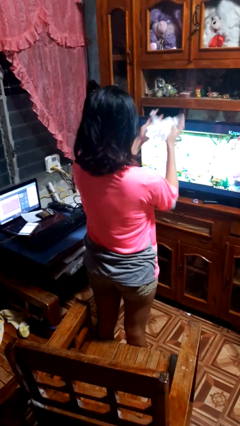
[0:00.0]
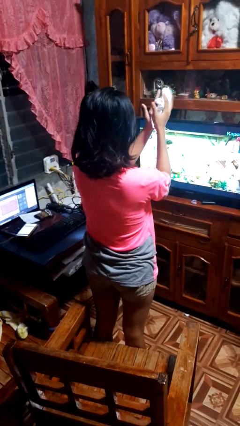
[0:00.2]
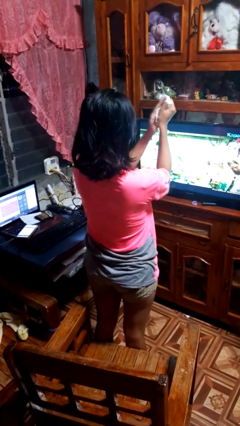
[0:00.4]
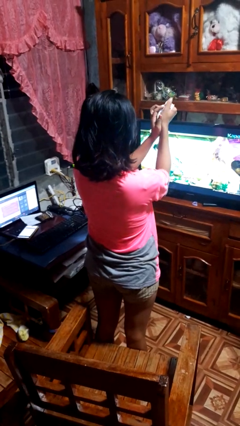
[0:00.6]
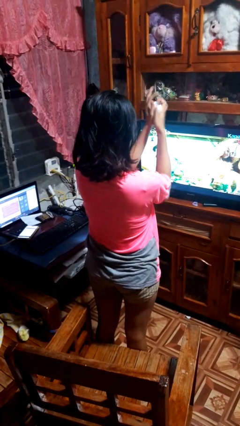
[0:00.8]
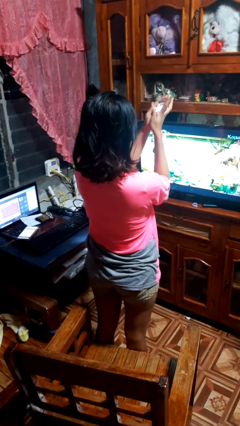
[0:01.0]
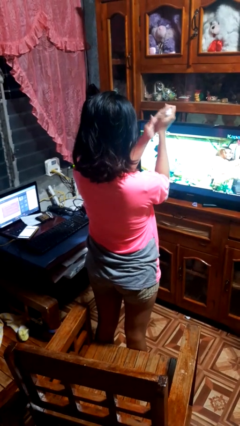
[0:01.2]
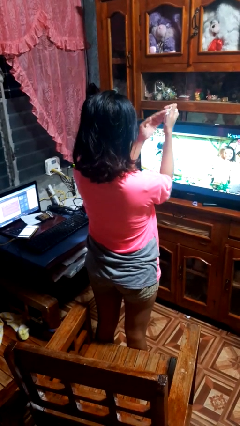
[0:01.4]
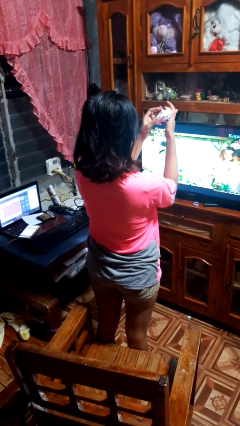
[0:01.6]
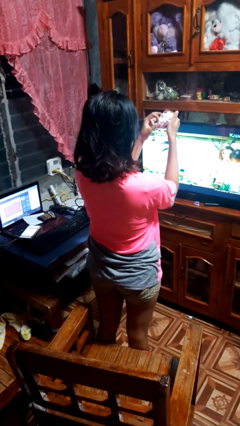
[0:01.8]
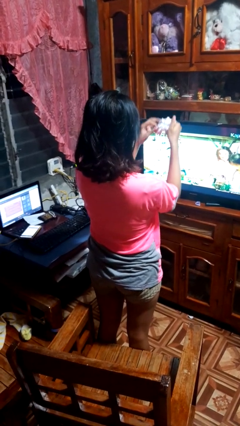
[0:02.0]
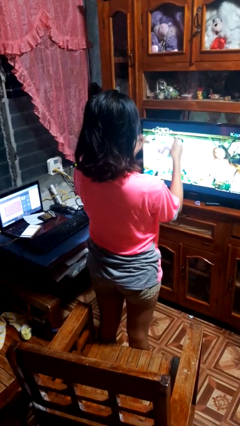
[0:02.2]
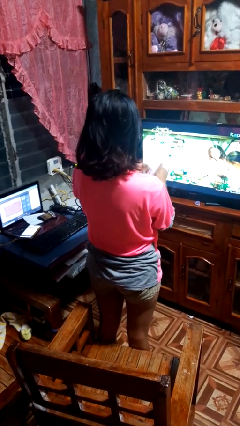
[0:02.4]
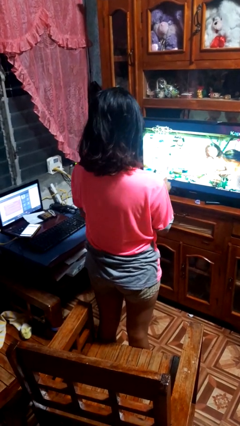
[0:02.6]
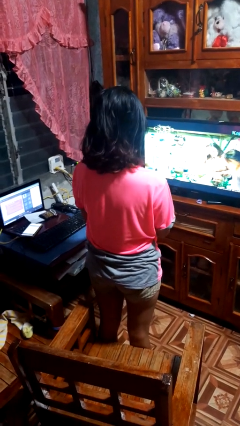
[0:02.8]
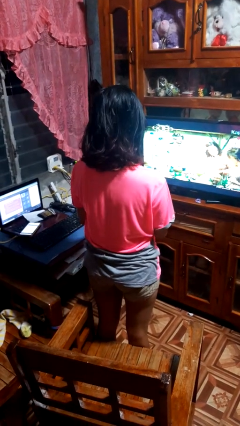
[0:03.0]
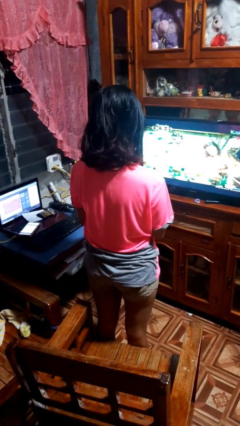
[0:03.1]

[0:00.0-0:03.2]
person crumples paper

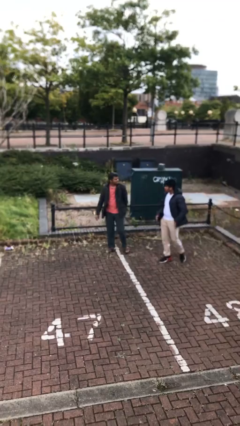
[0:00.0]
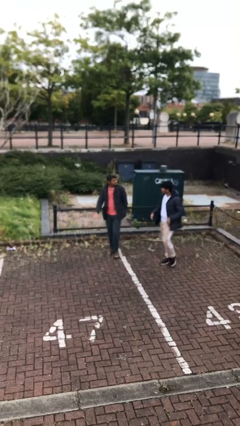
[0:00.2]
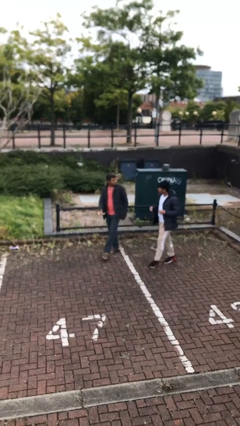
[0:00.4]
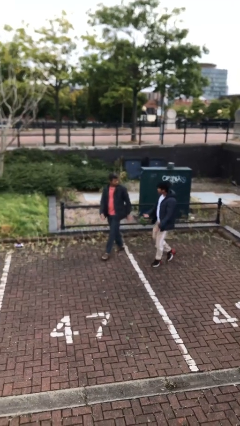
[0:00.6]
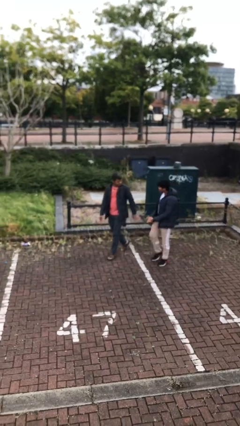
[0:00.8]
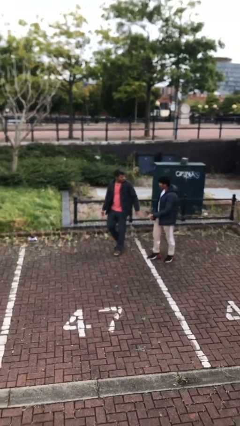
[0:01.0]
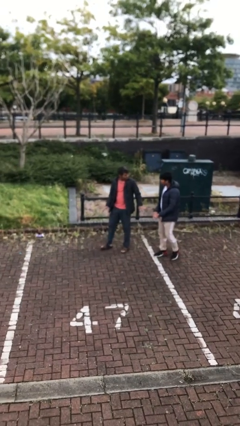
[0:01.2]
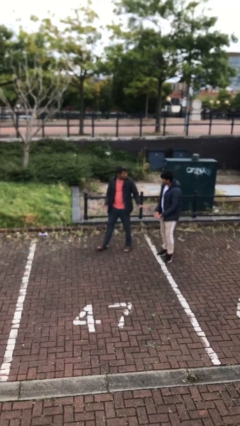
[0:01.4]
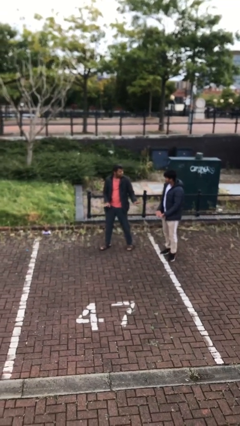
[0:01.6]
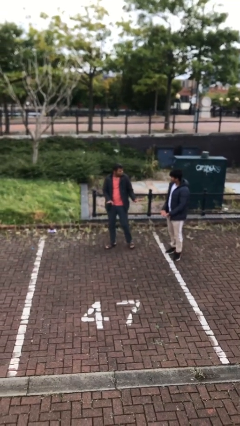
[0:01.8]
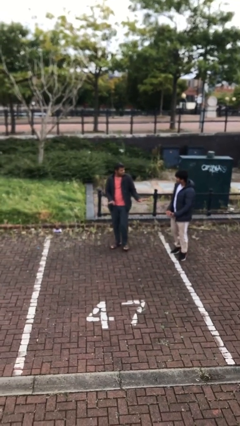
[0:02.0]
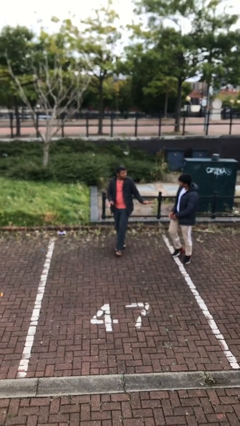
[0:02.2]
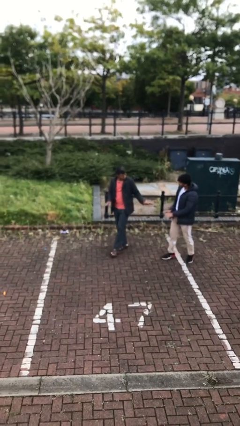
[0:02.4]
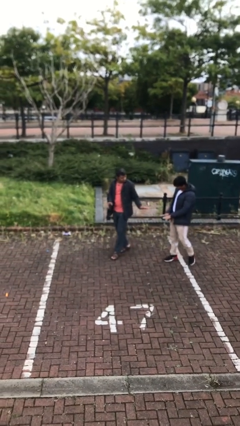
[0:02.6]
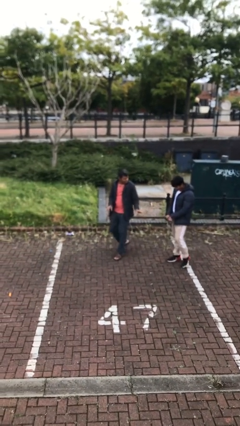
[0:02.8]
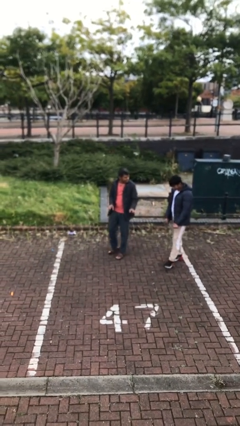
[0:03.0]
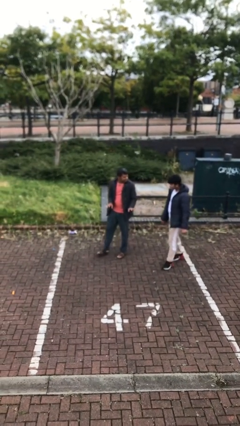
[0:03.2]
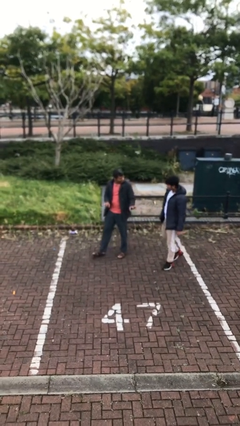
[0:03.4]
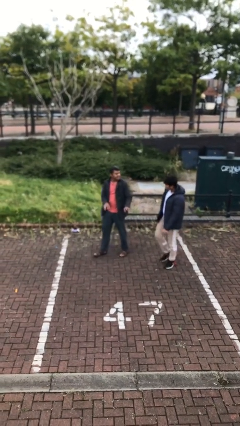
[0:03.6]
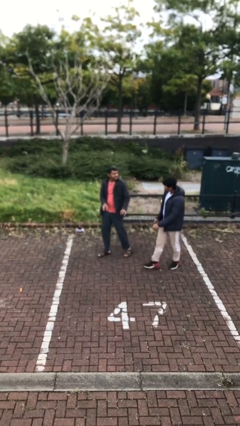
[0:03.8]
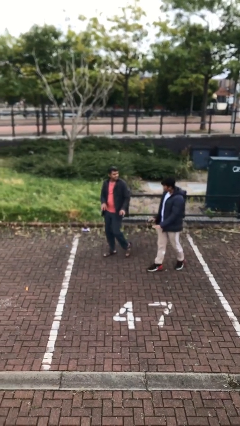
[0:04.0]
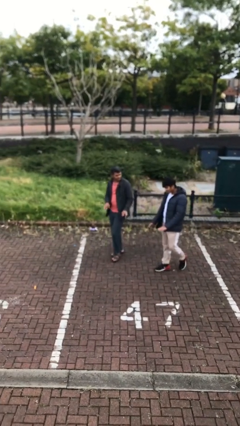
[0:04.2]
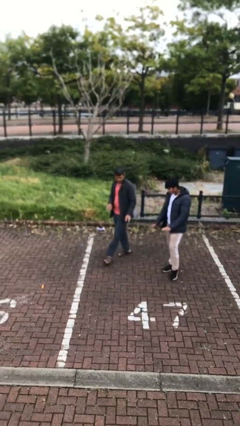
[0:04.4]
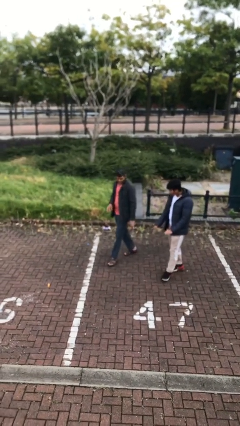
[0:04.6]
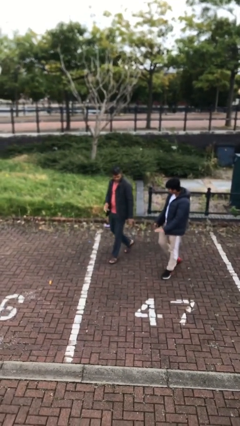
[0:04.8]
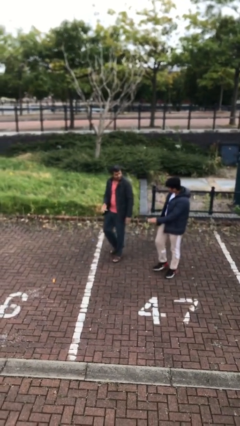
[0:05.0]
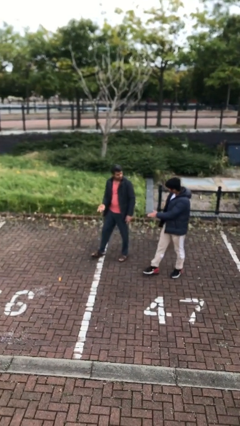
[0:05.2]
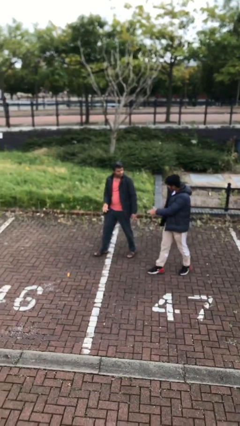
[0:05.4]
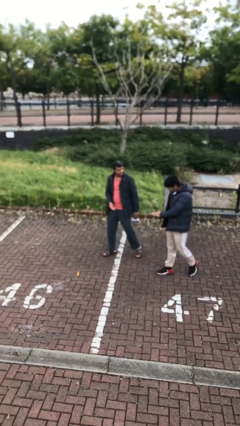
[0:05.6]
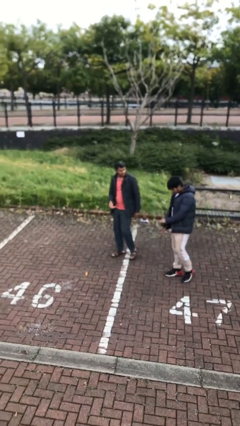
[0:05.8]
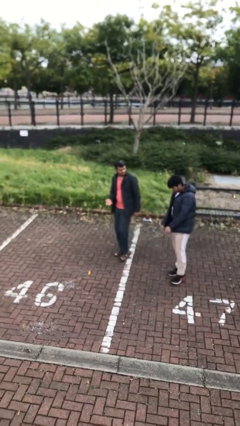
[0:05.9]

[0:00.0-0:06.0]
person talks to person

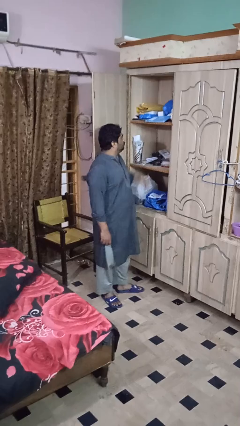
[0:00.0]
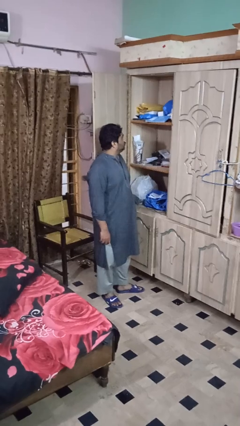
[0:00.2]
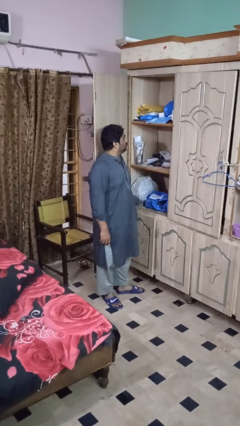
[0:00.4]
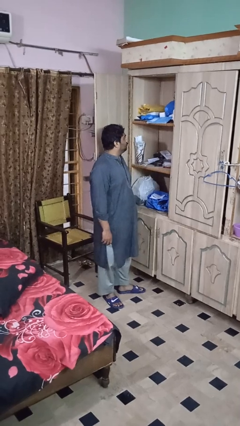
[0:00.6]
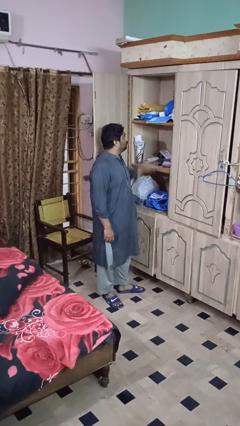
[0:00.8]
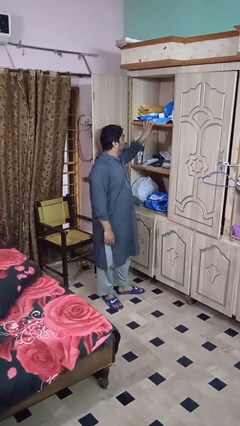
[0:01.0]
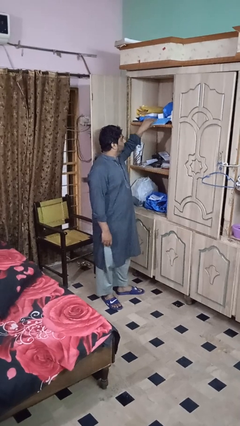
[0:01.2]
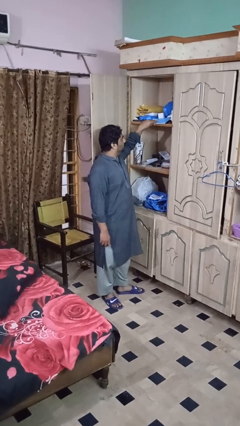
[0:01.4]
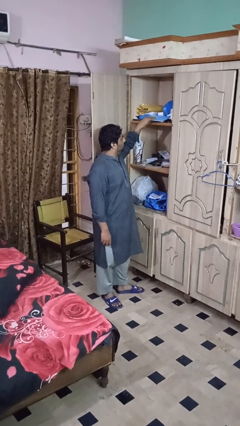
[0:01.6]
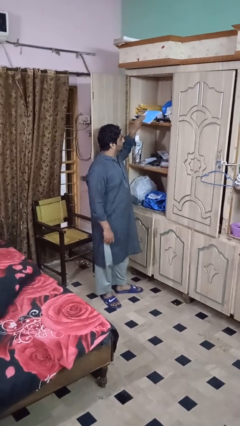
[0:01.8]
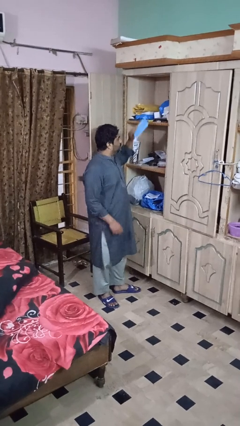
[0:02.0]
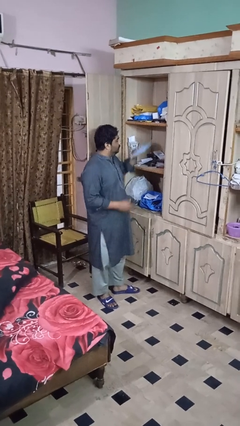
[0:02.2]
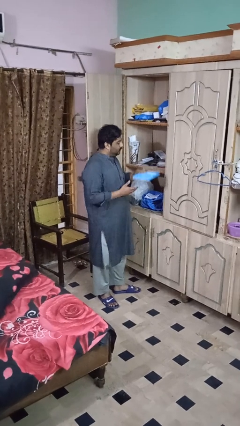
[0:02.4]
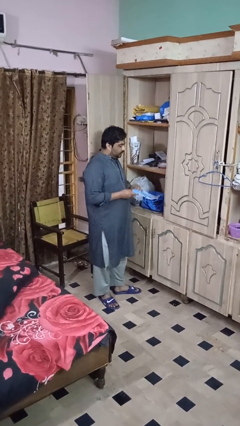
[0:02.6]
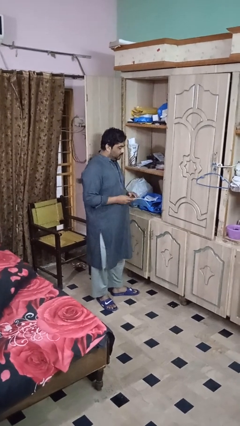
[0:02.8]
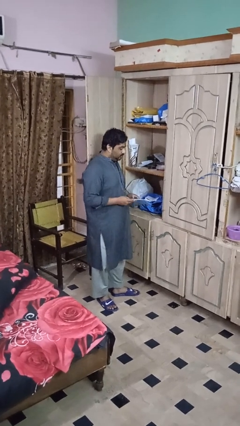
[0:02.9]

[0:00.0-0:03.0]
person picks up object from shelf

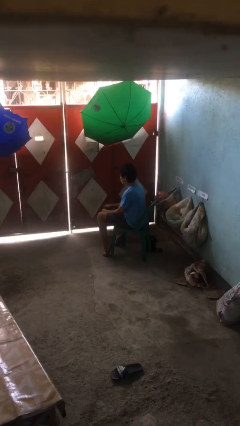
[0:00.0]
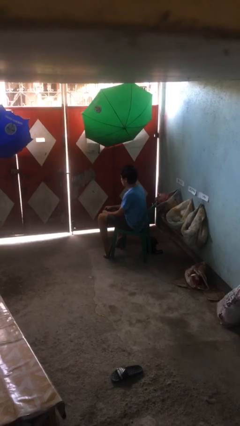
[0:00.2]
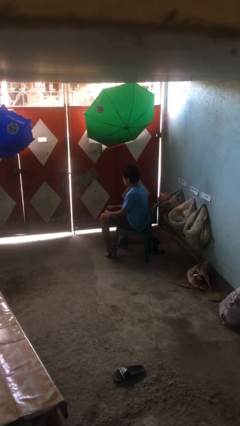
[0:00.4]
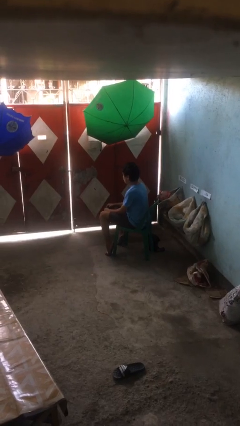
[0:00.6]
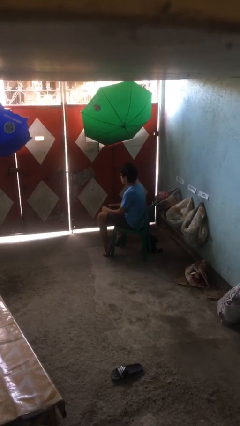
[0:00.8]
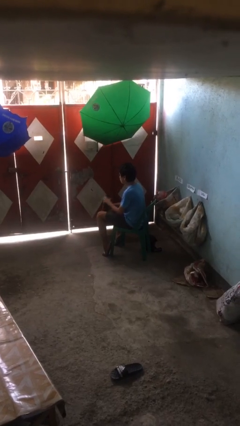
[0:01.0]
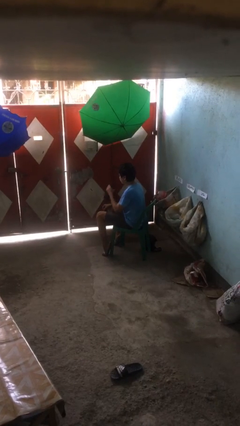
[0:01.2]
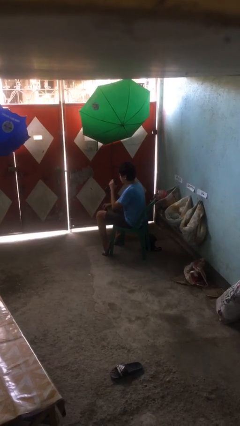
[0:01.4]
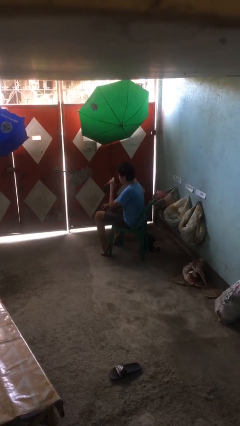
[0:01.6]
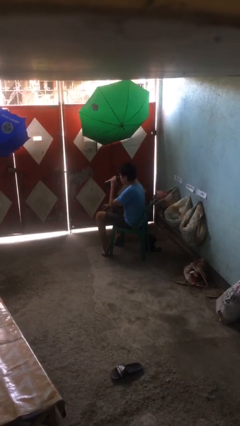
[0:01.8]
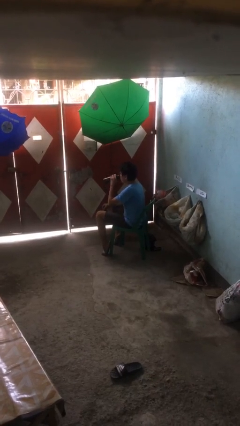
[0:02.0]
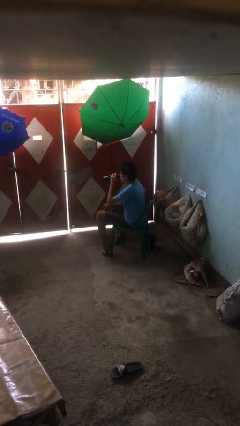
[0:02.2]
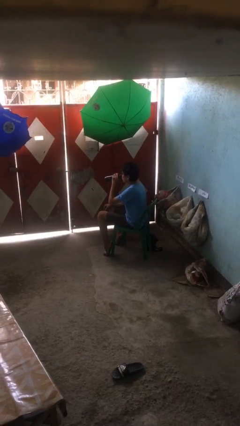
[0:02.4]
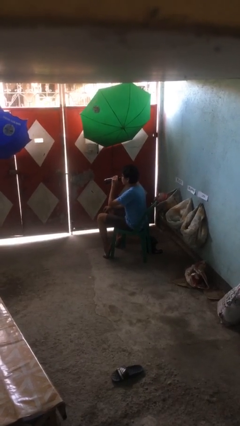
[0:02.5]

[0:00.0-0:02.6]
person drinks from bottle

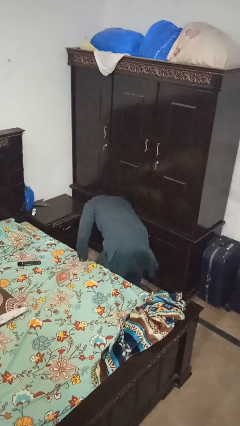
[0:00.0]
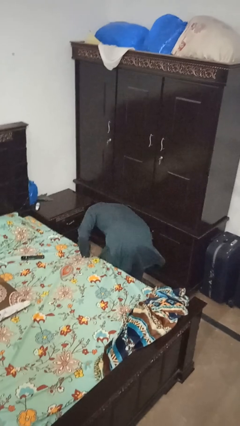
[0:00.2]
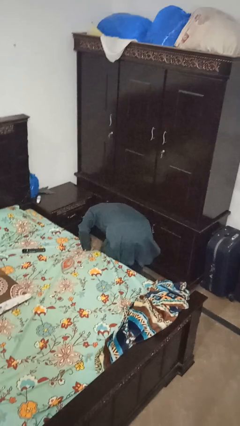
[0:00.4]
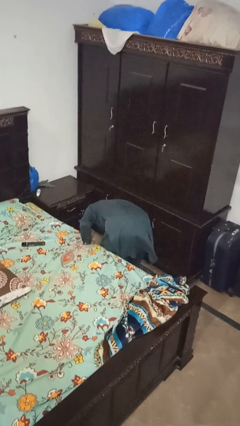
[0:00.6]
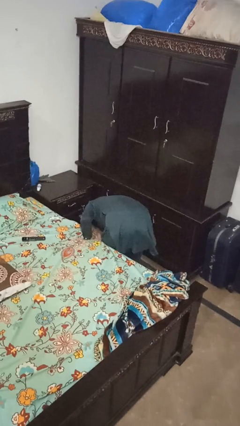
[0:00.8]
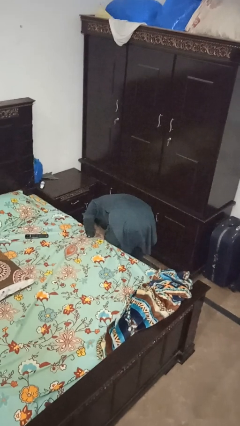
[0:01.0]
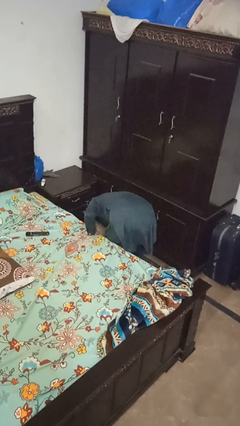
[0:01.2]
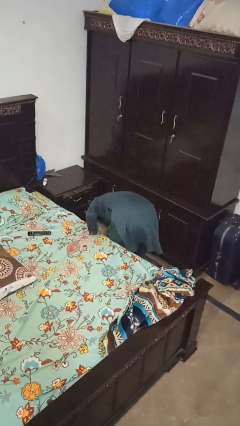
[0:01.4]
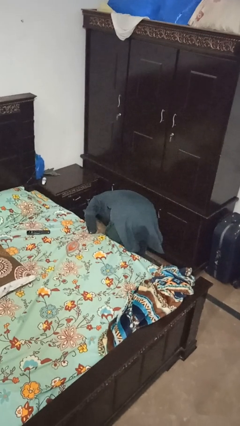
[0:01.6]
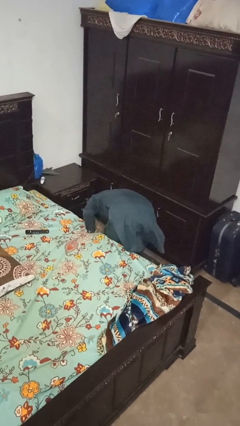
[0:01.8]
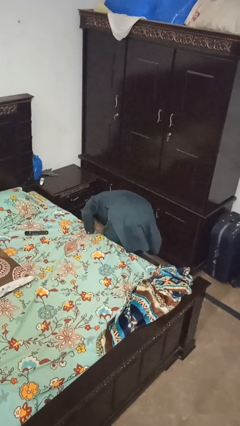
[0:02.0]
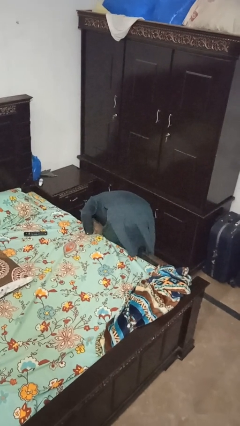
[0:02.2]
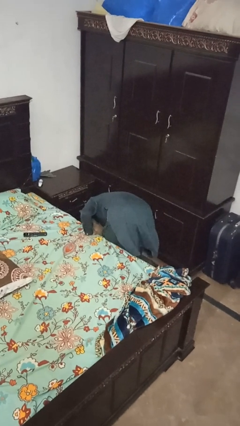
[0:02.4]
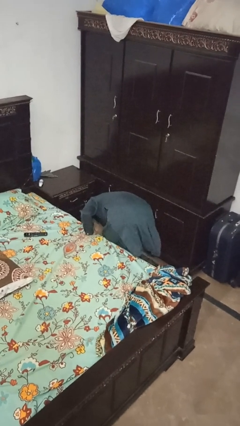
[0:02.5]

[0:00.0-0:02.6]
person searches under bed

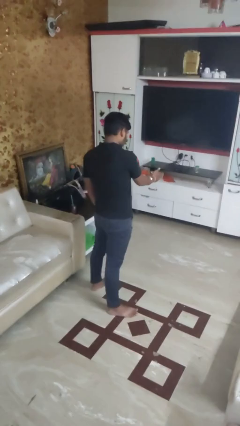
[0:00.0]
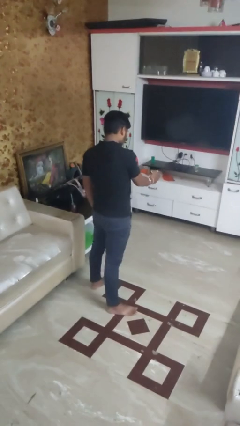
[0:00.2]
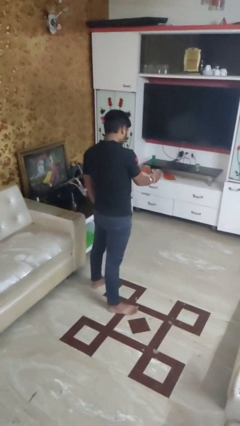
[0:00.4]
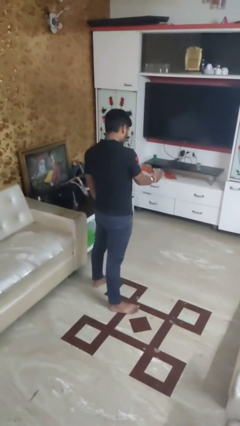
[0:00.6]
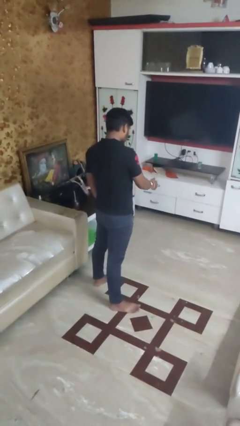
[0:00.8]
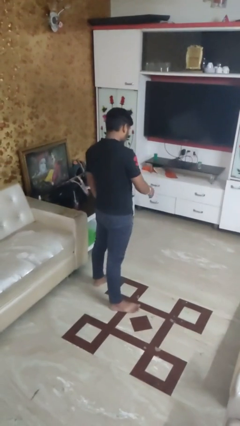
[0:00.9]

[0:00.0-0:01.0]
person karate chop
